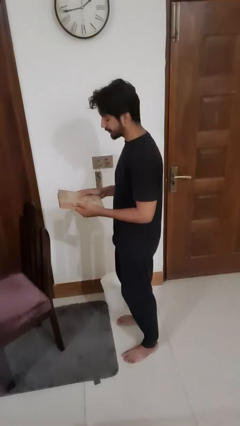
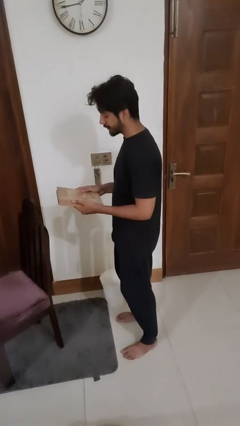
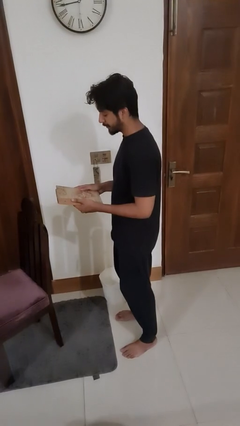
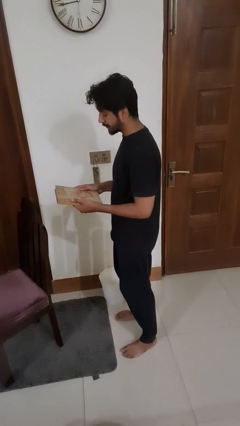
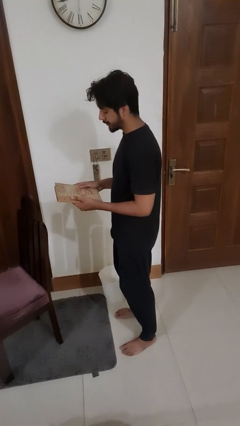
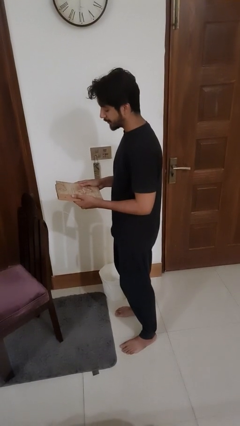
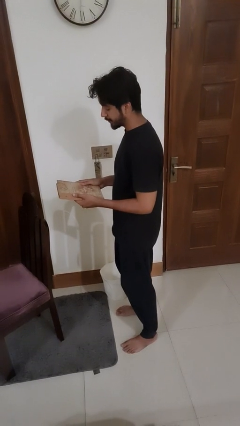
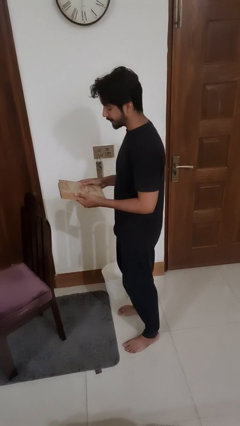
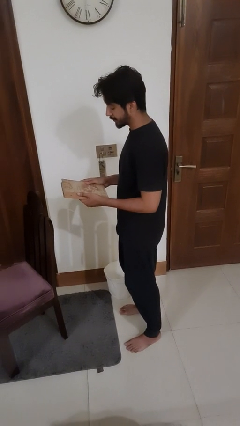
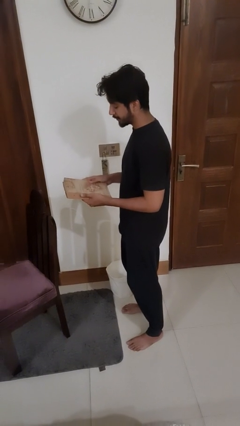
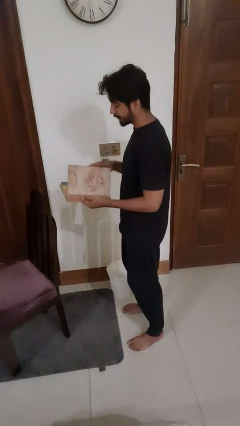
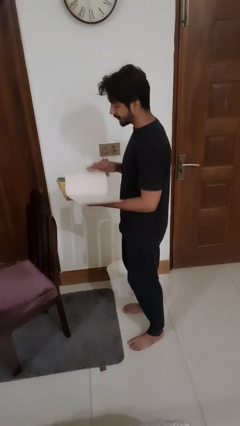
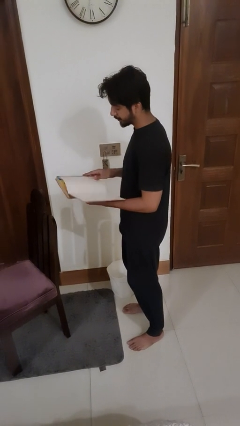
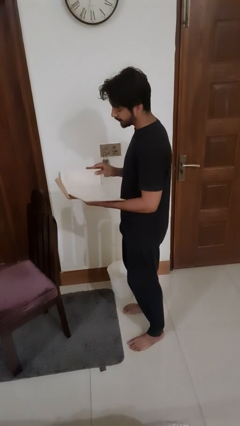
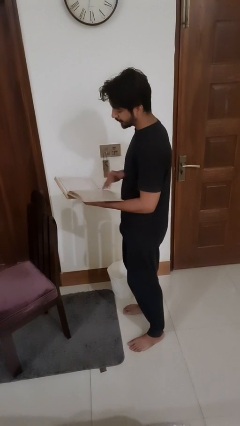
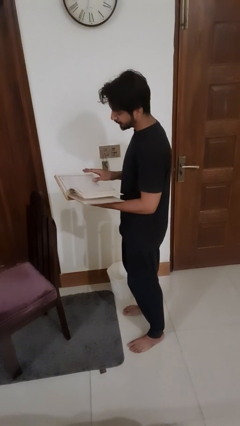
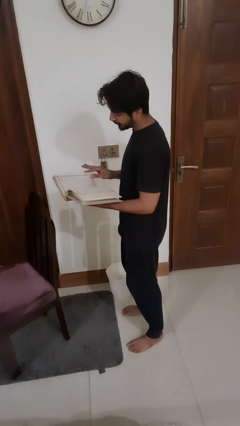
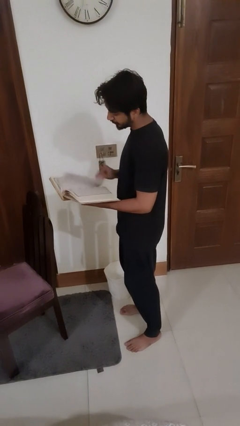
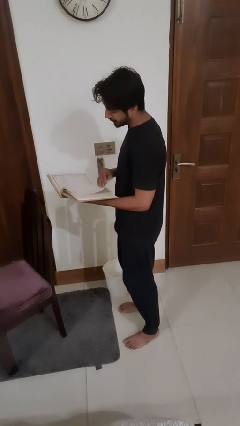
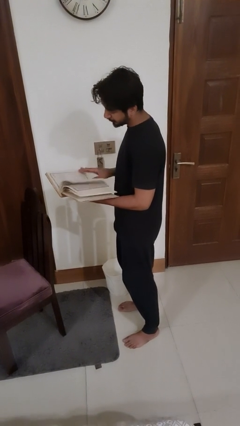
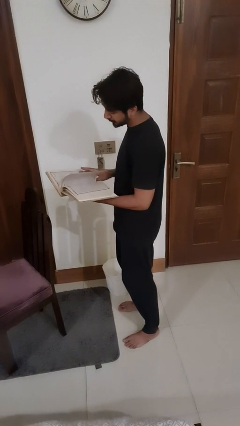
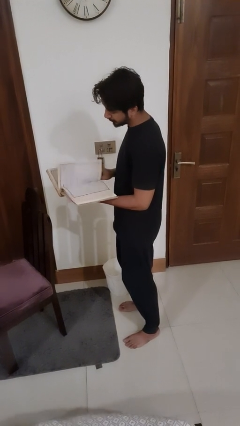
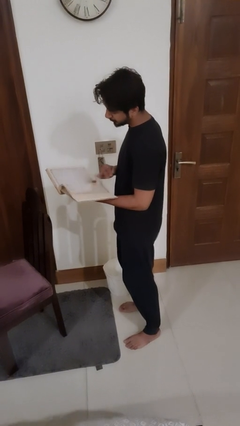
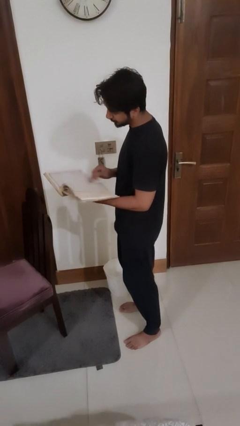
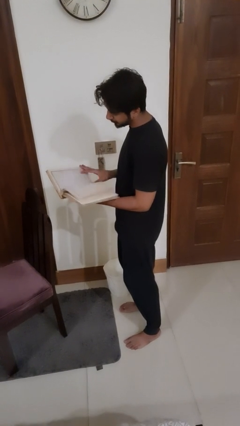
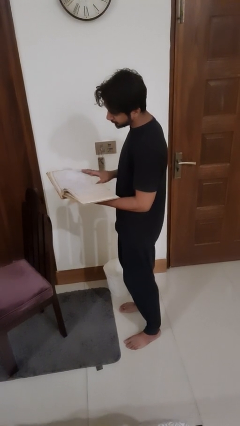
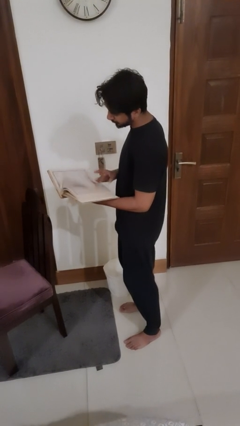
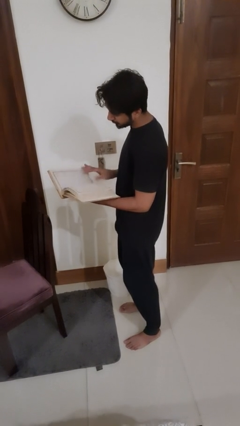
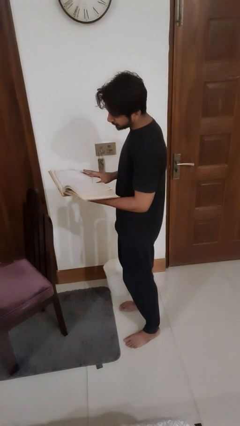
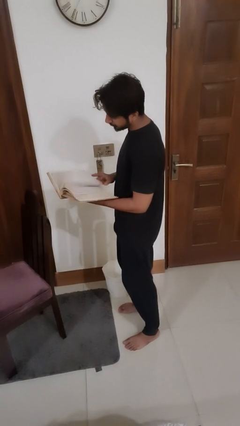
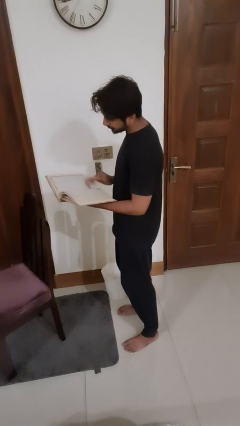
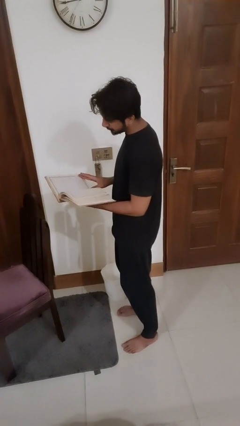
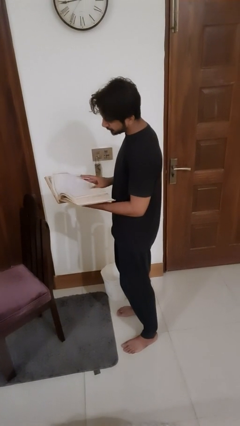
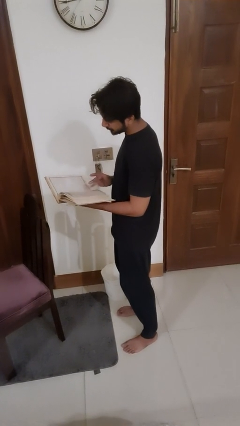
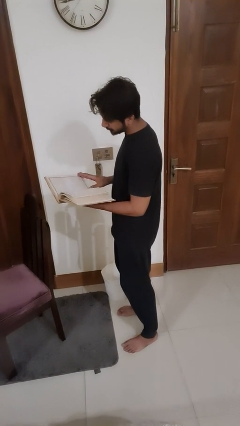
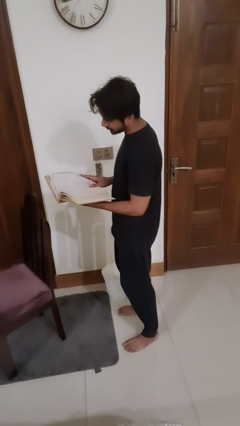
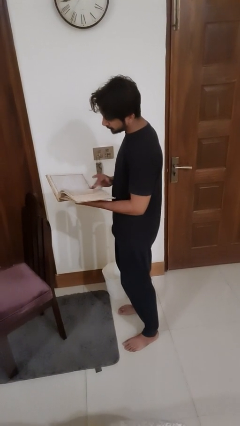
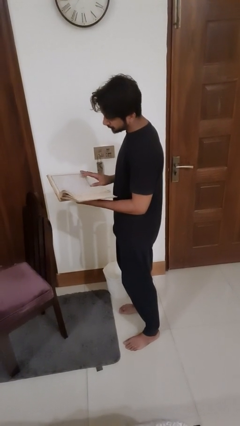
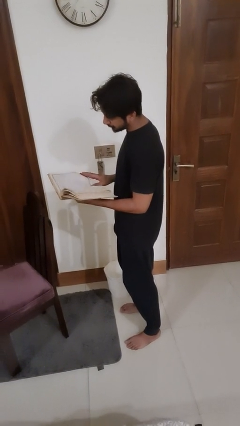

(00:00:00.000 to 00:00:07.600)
person reads book

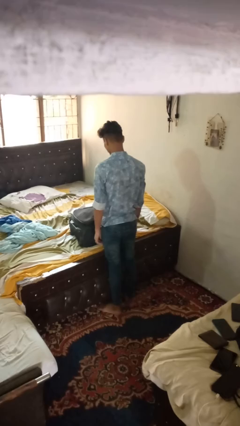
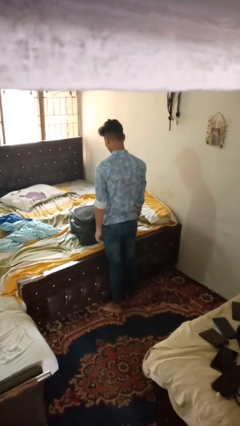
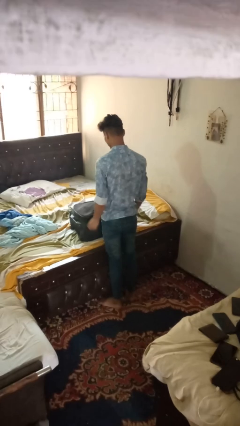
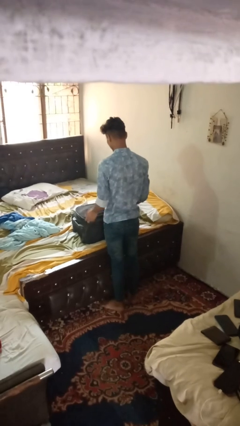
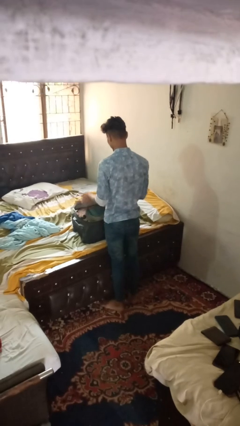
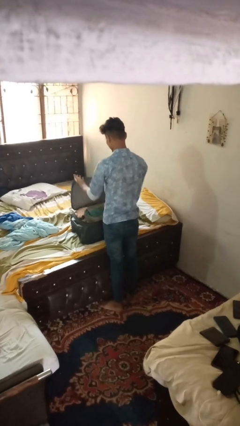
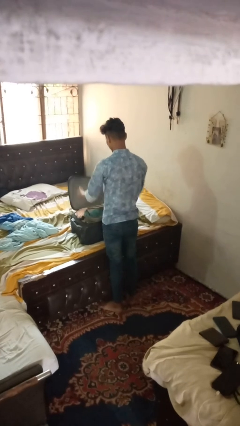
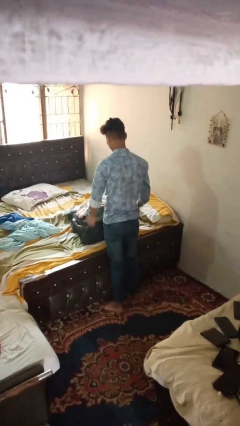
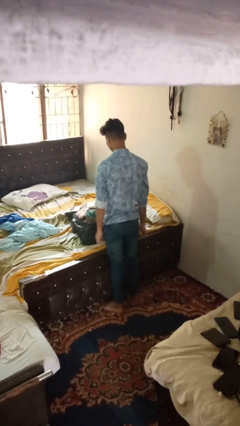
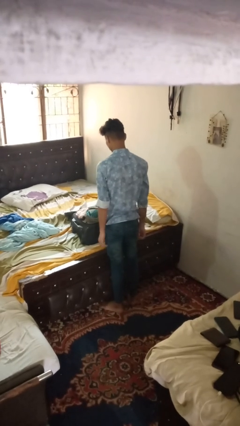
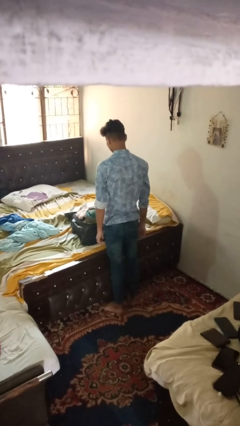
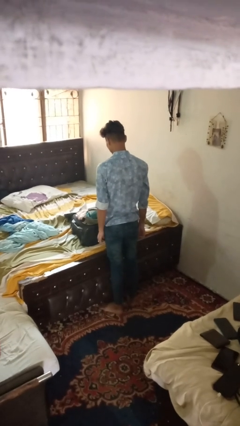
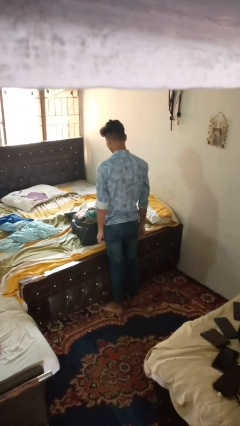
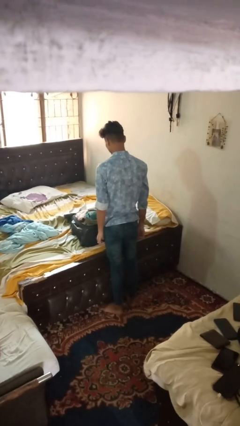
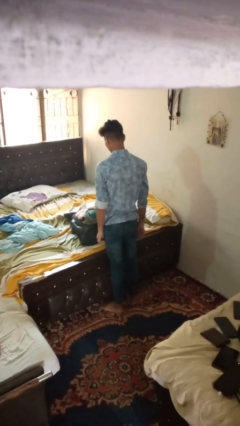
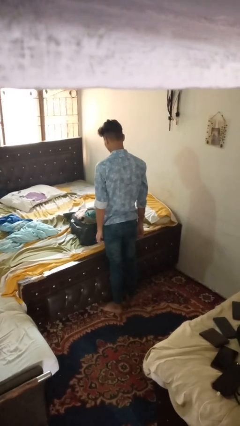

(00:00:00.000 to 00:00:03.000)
person opens suitcase

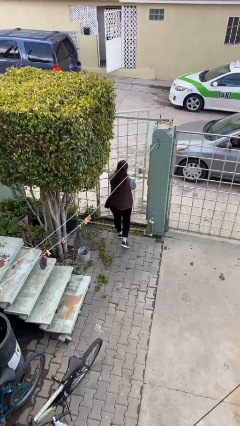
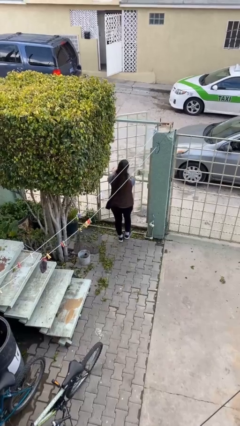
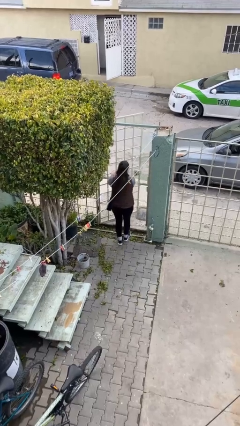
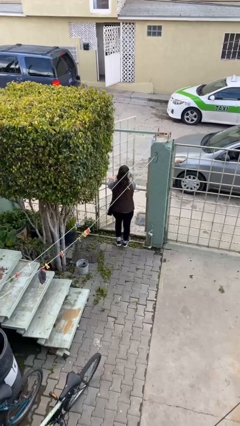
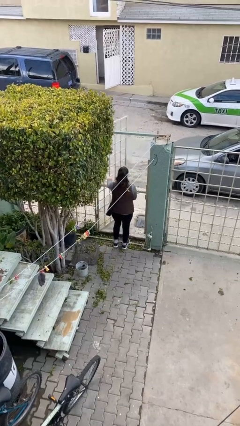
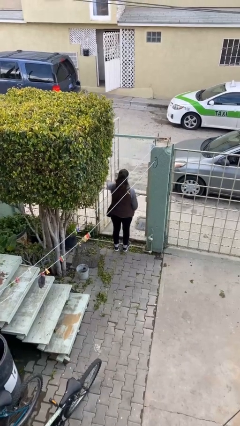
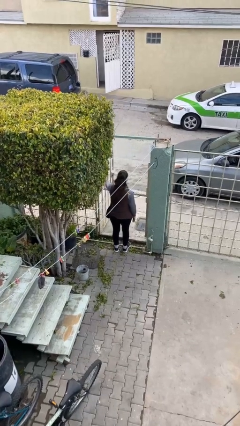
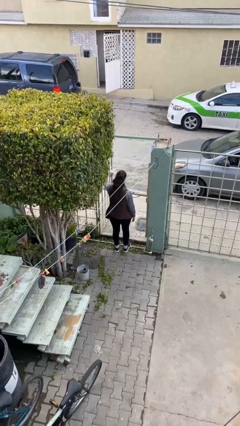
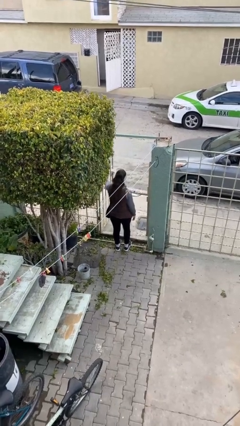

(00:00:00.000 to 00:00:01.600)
person opens facility door

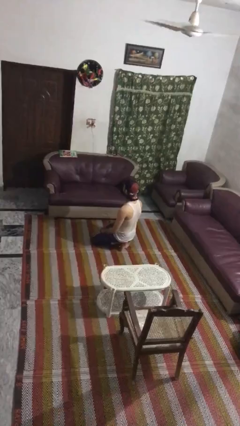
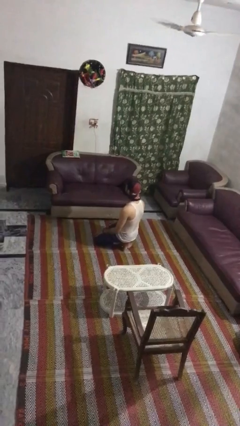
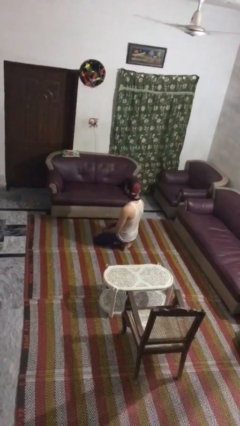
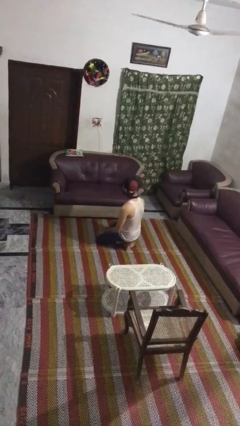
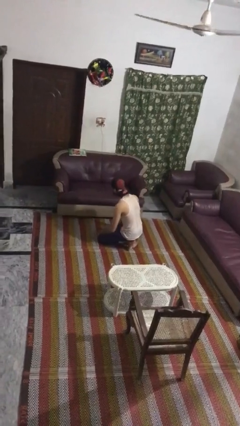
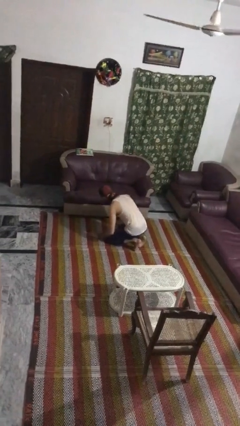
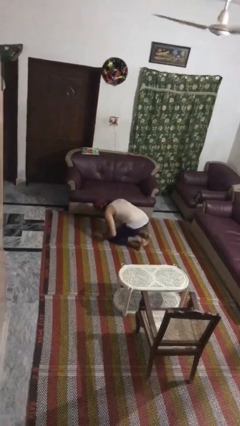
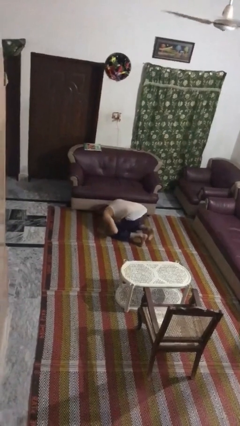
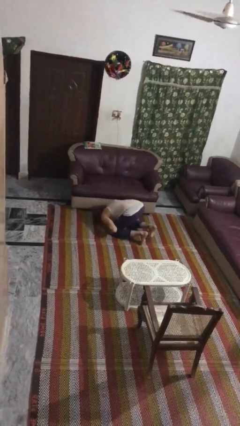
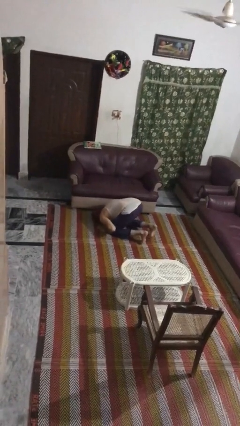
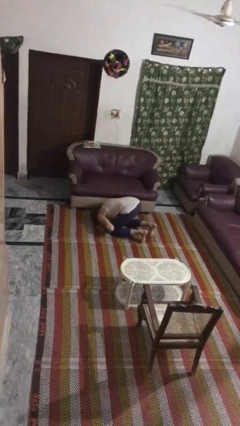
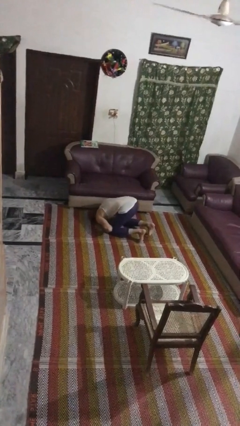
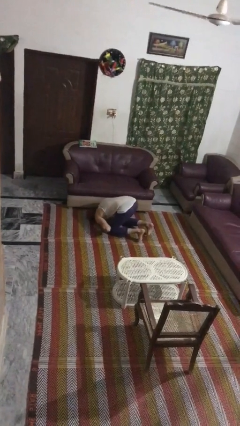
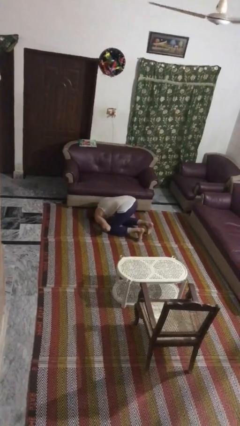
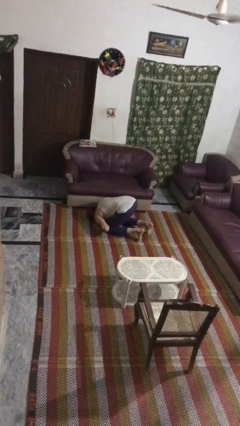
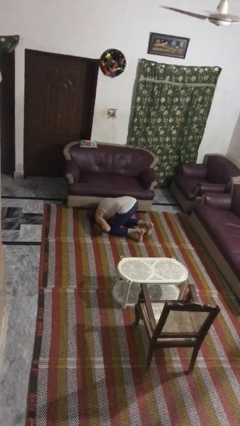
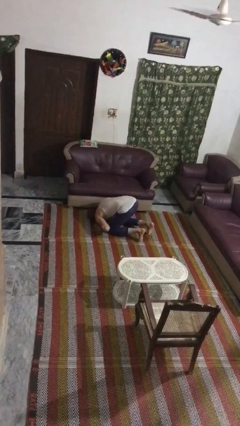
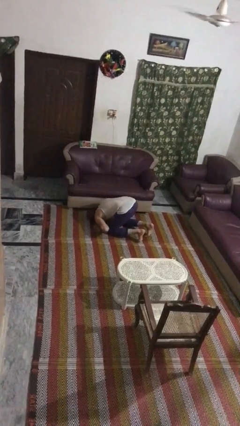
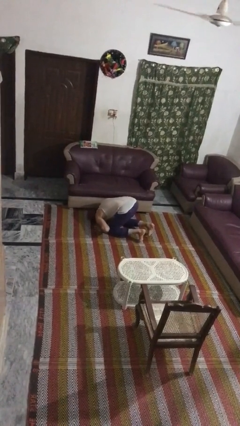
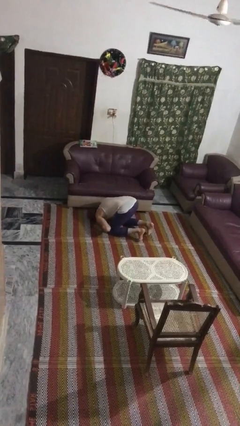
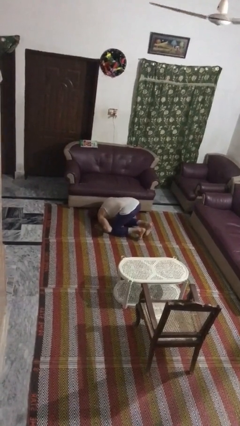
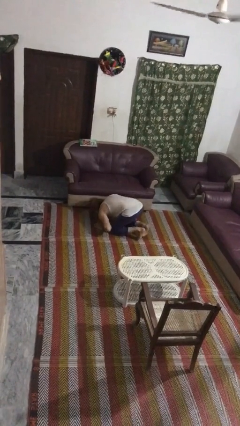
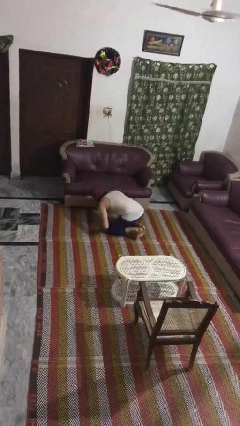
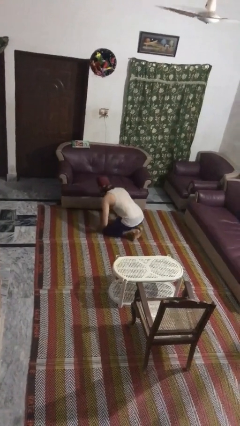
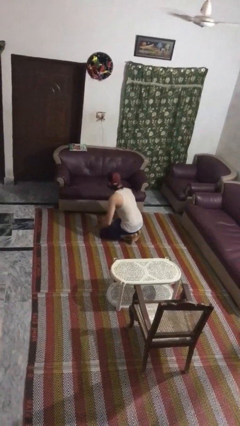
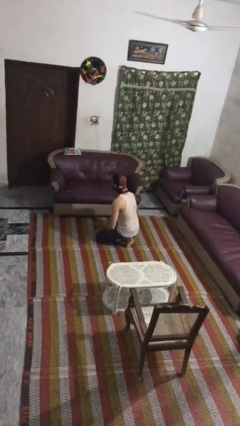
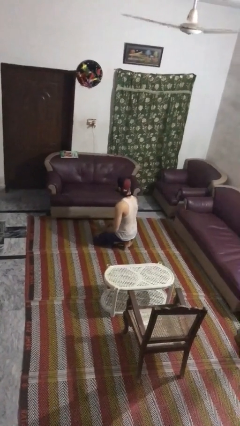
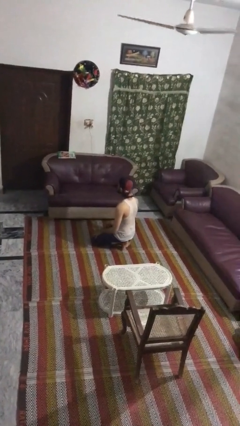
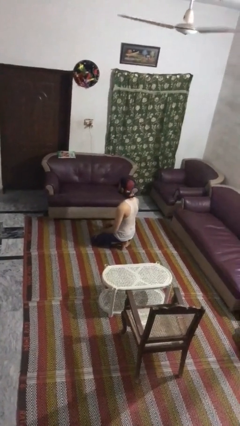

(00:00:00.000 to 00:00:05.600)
person searches under couch
